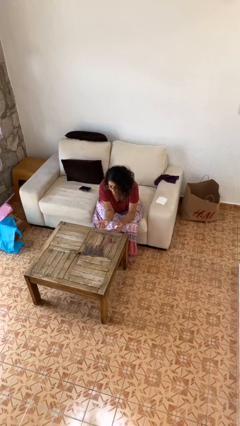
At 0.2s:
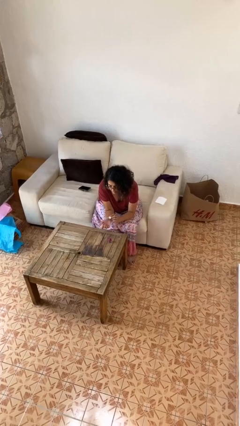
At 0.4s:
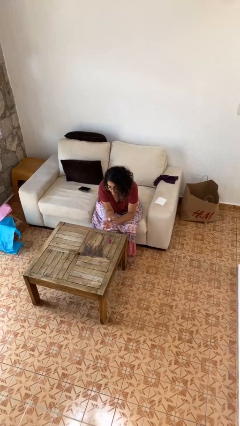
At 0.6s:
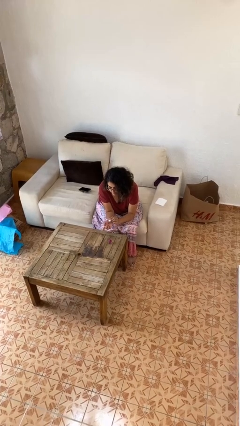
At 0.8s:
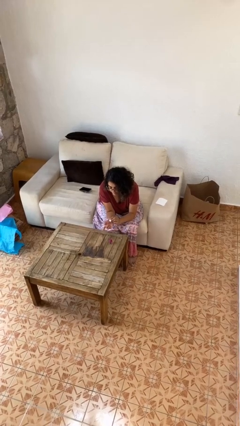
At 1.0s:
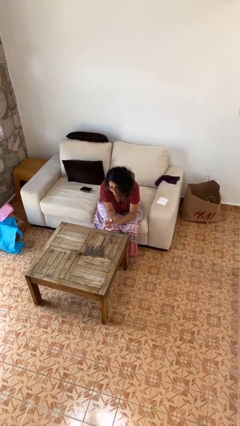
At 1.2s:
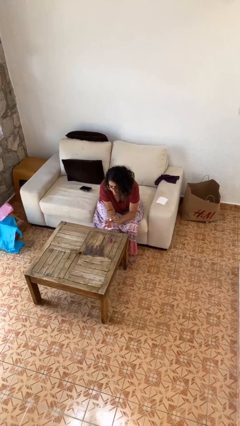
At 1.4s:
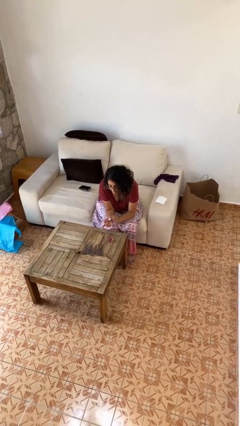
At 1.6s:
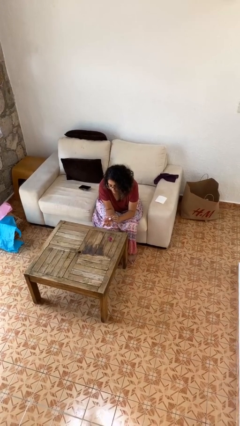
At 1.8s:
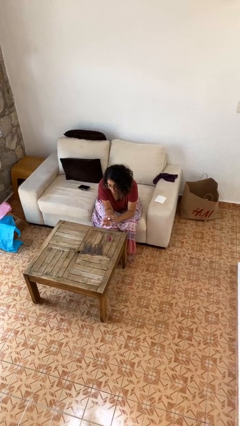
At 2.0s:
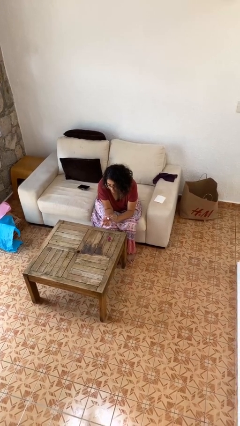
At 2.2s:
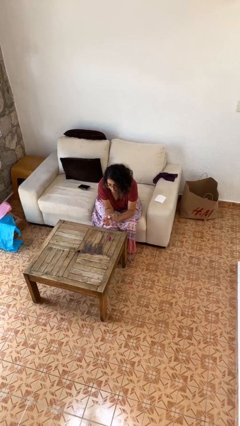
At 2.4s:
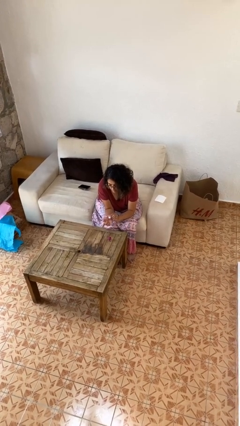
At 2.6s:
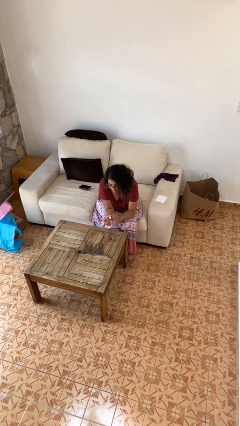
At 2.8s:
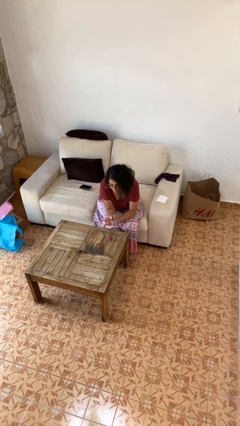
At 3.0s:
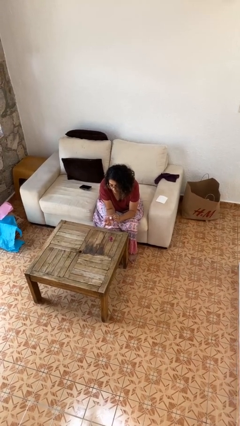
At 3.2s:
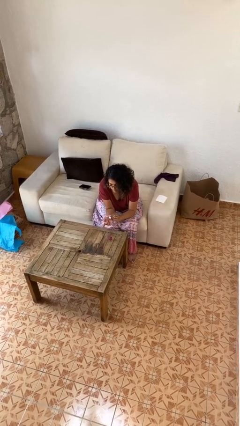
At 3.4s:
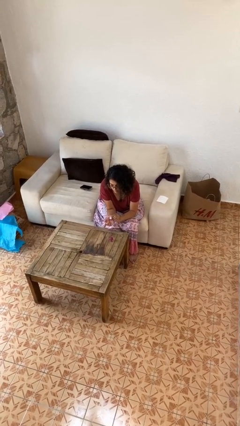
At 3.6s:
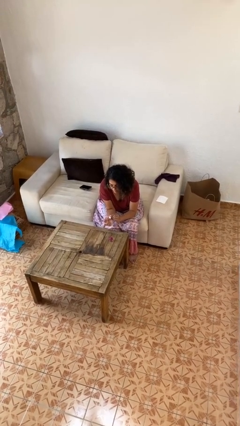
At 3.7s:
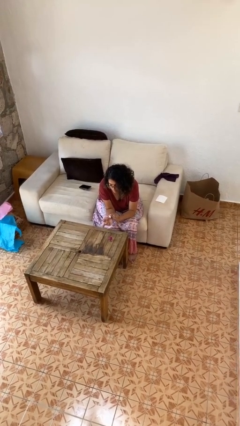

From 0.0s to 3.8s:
person paints fingernails

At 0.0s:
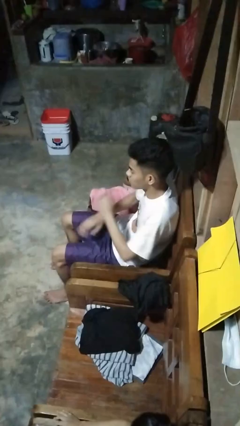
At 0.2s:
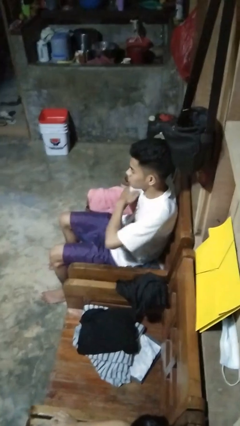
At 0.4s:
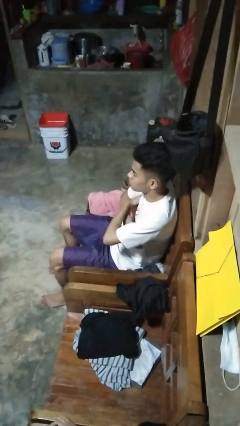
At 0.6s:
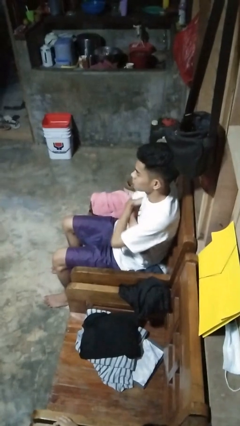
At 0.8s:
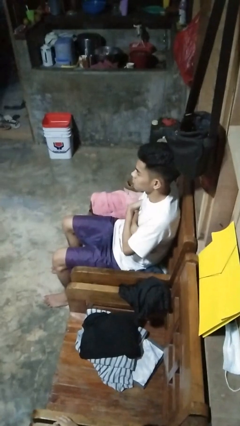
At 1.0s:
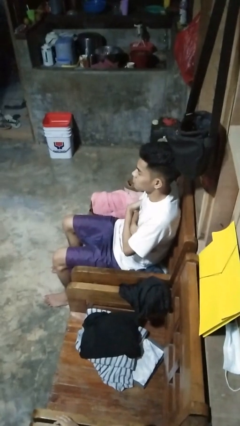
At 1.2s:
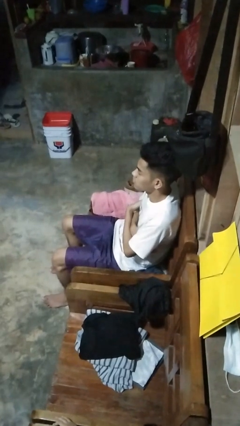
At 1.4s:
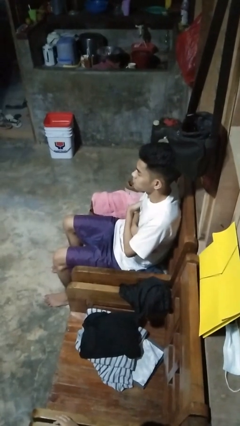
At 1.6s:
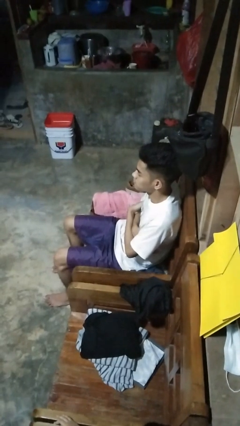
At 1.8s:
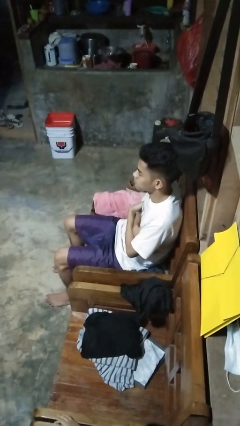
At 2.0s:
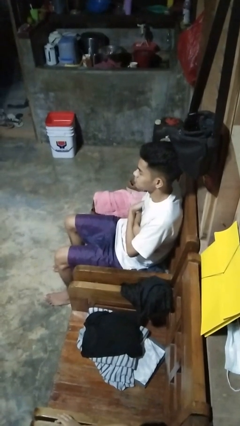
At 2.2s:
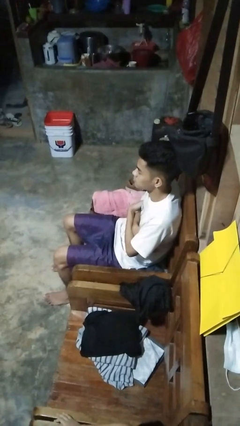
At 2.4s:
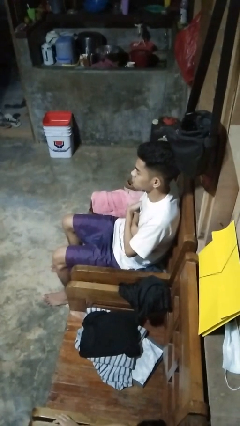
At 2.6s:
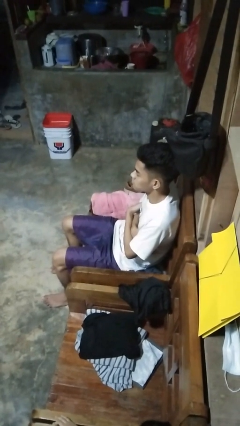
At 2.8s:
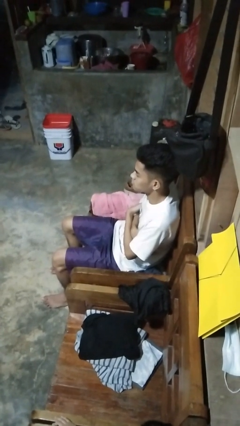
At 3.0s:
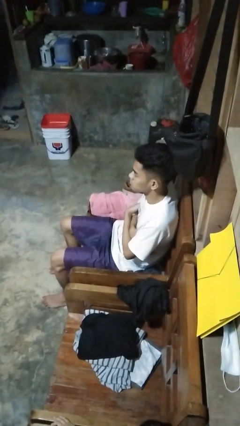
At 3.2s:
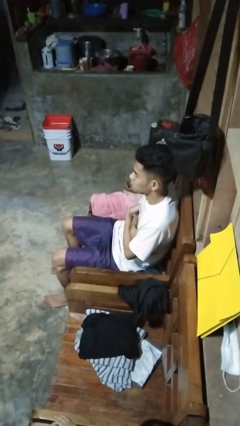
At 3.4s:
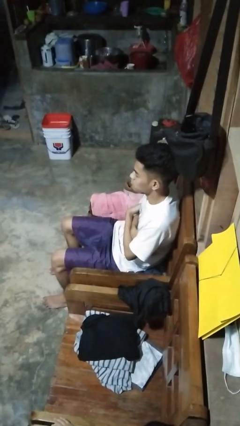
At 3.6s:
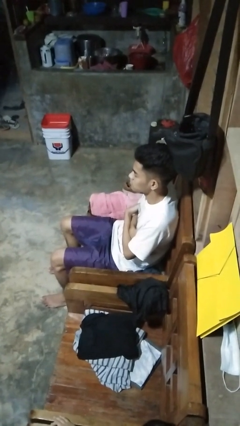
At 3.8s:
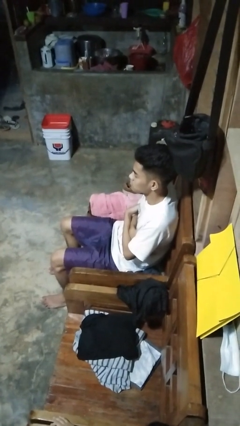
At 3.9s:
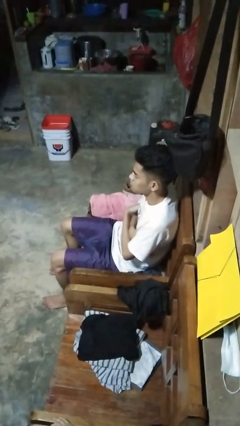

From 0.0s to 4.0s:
person crosses arms

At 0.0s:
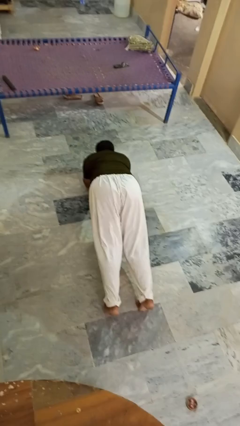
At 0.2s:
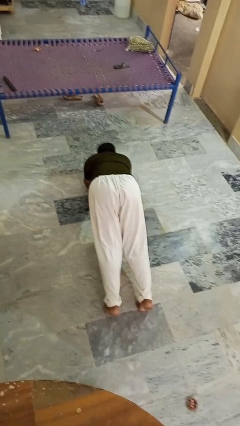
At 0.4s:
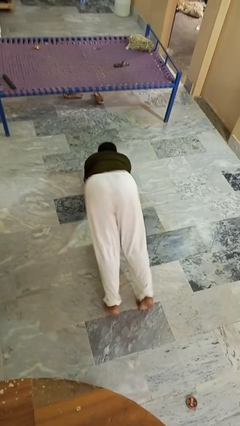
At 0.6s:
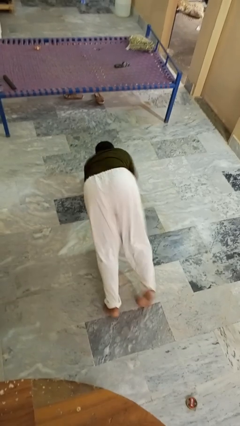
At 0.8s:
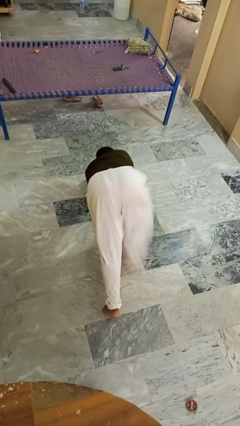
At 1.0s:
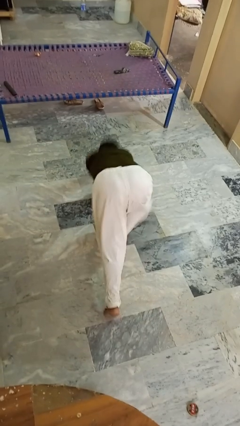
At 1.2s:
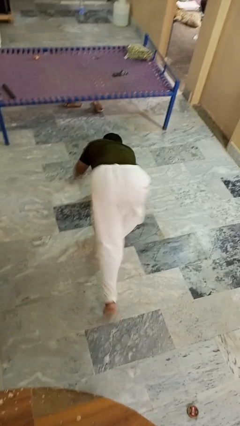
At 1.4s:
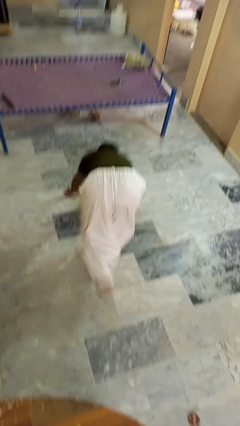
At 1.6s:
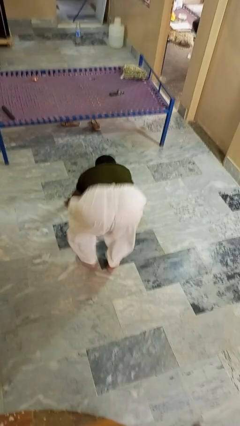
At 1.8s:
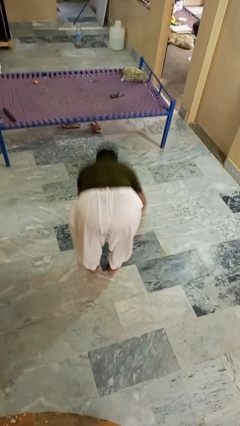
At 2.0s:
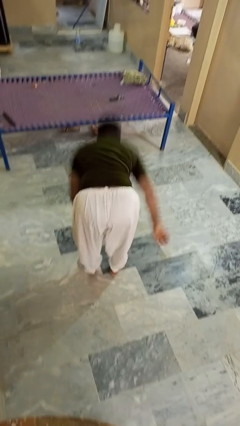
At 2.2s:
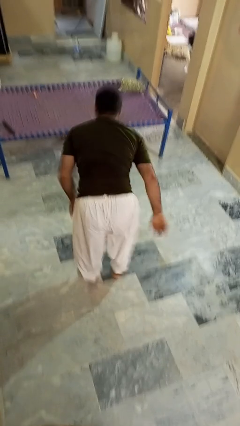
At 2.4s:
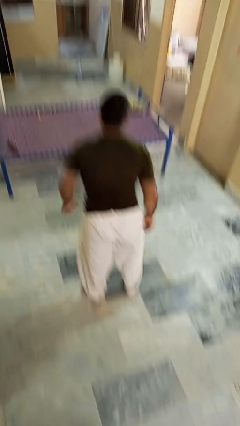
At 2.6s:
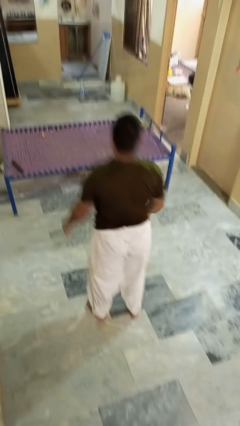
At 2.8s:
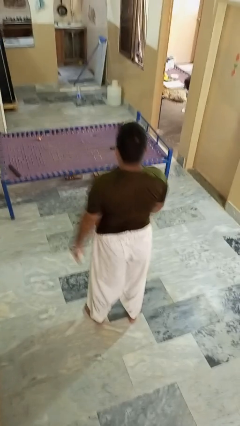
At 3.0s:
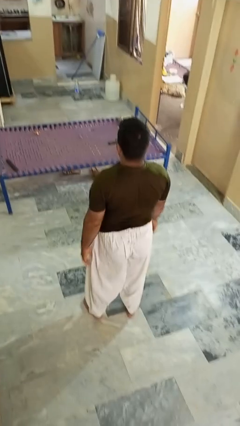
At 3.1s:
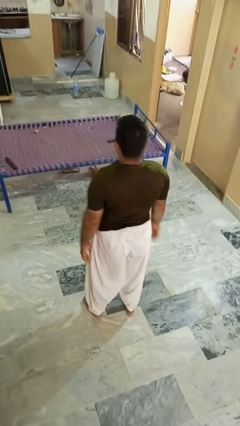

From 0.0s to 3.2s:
person stands up from floor

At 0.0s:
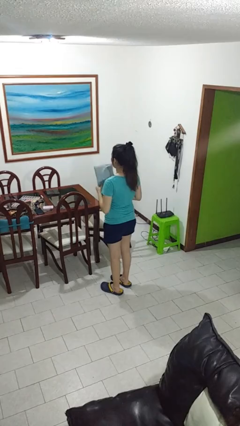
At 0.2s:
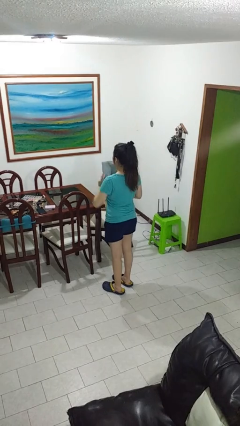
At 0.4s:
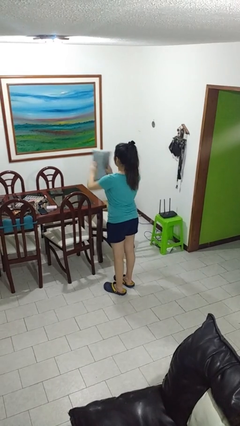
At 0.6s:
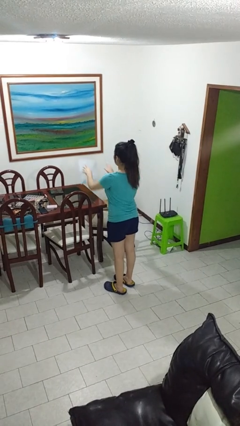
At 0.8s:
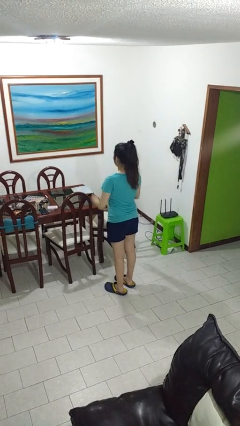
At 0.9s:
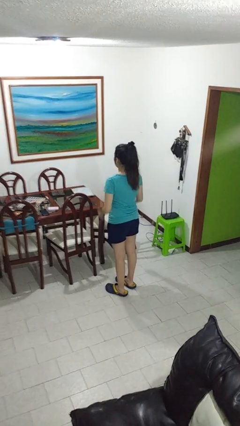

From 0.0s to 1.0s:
person throws object on table

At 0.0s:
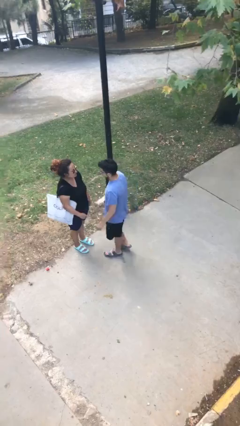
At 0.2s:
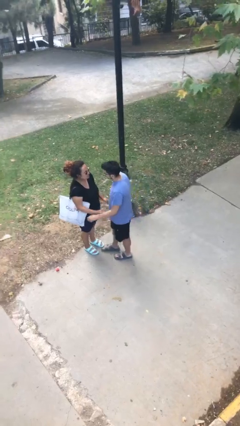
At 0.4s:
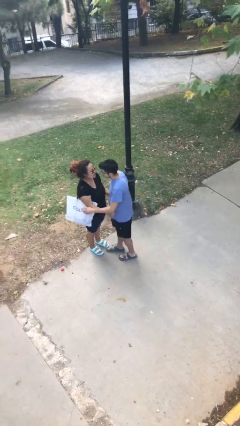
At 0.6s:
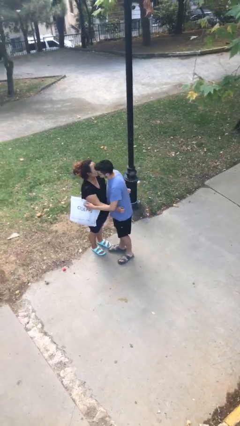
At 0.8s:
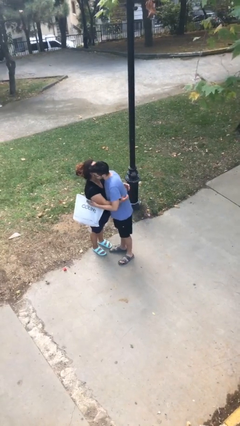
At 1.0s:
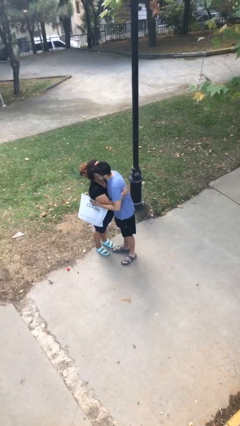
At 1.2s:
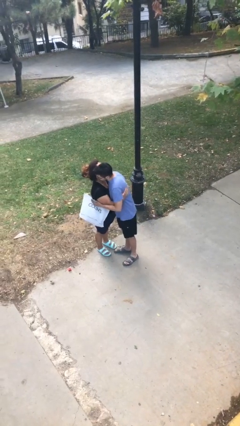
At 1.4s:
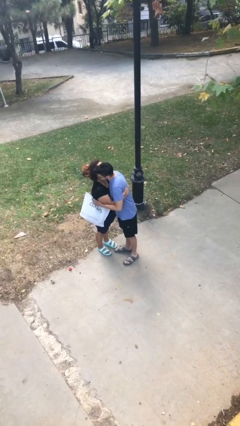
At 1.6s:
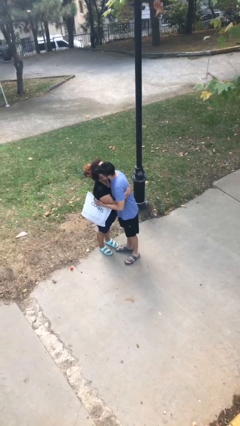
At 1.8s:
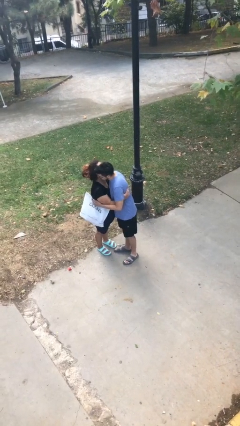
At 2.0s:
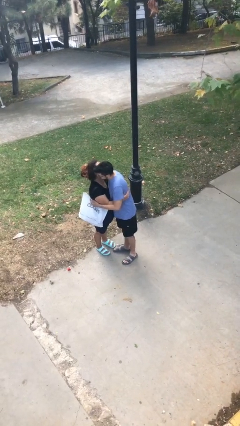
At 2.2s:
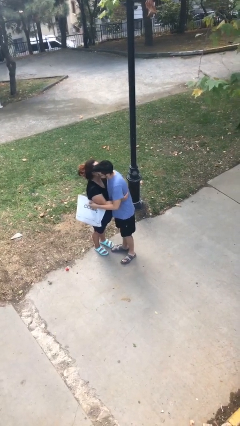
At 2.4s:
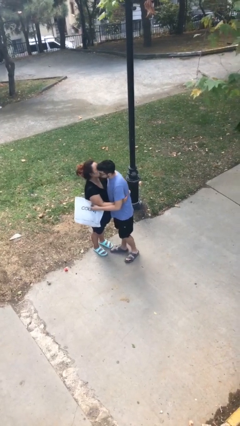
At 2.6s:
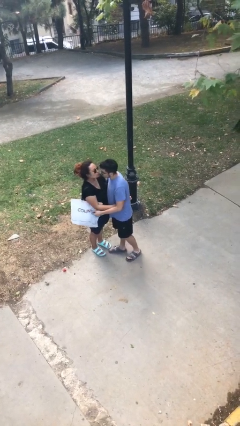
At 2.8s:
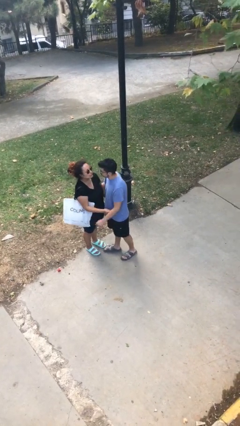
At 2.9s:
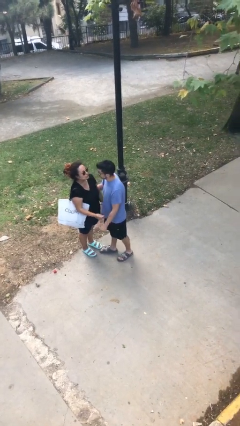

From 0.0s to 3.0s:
person embraces person

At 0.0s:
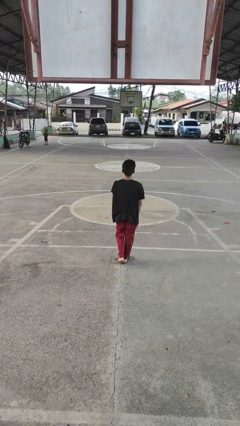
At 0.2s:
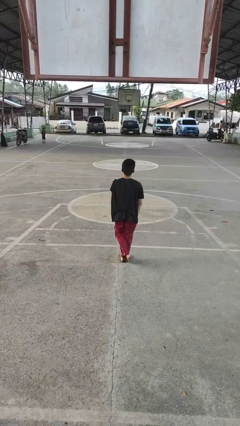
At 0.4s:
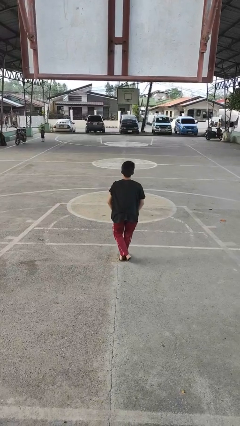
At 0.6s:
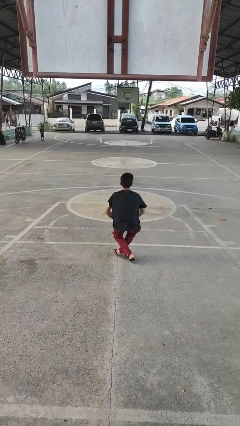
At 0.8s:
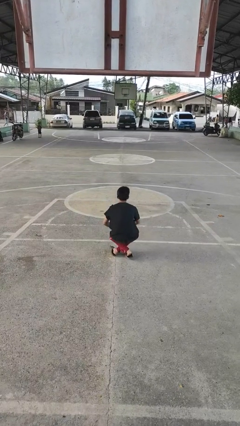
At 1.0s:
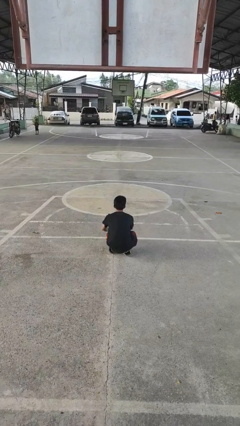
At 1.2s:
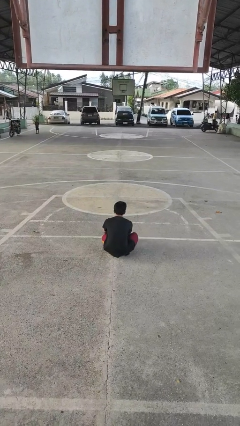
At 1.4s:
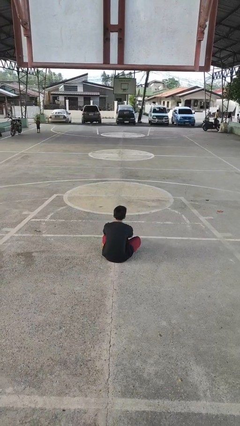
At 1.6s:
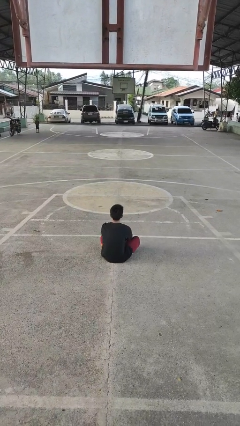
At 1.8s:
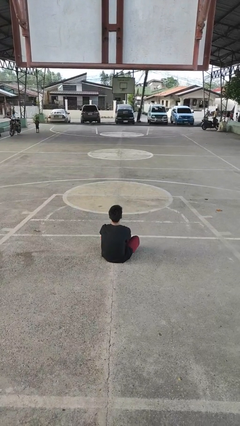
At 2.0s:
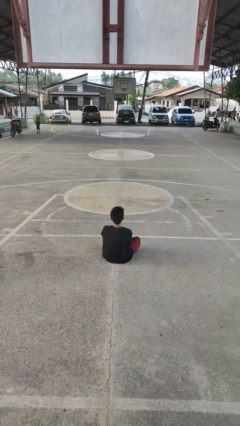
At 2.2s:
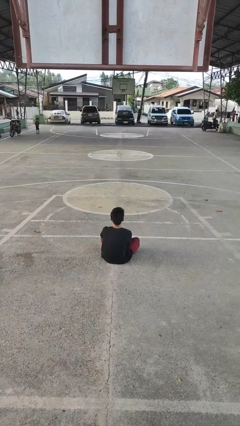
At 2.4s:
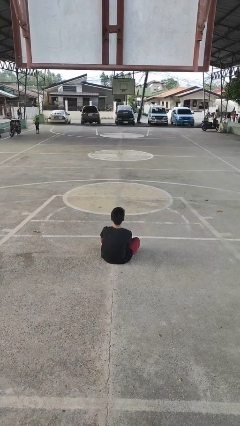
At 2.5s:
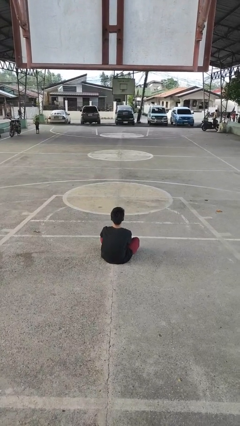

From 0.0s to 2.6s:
person sits crisscross

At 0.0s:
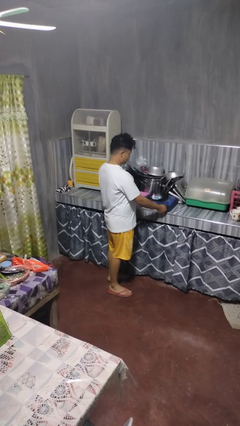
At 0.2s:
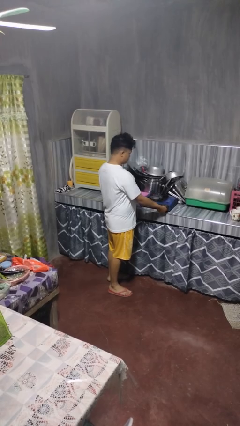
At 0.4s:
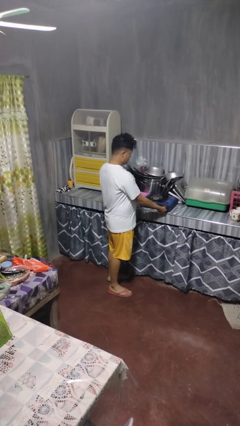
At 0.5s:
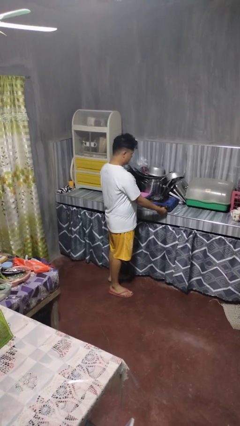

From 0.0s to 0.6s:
person turns off stovetop
